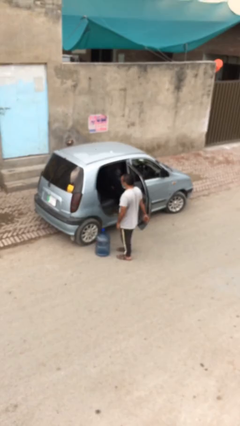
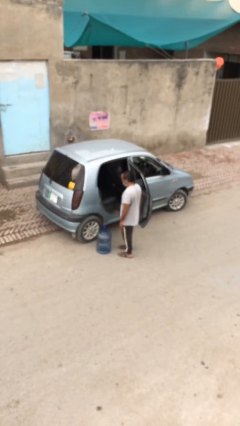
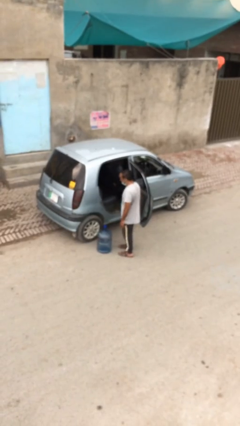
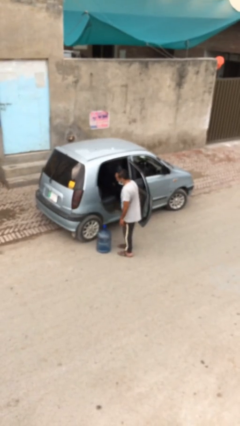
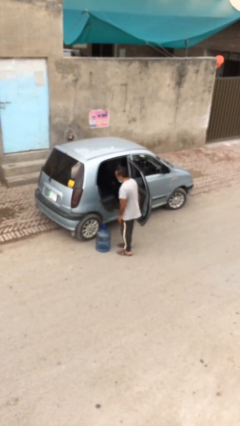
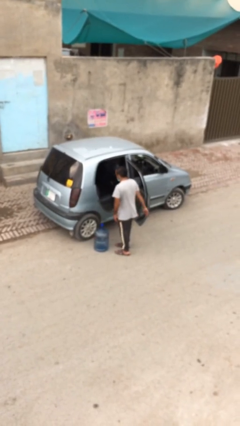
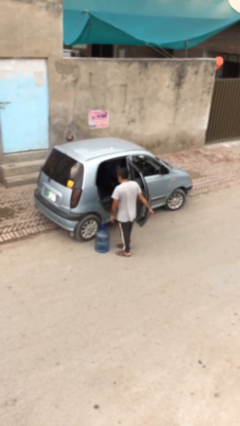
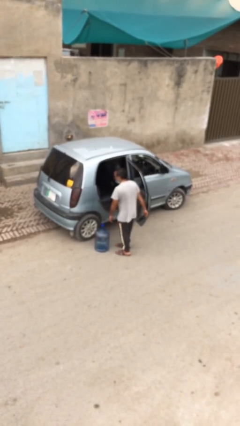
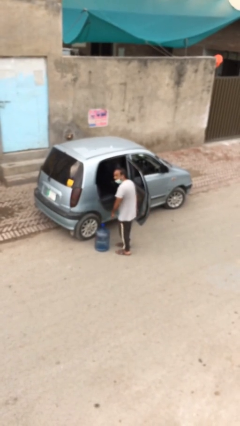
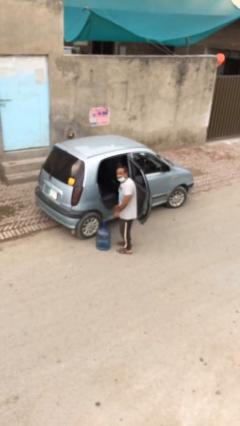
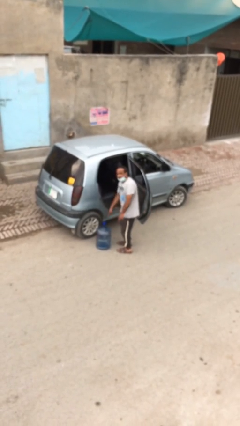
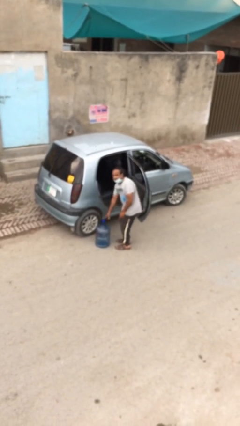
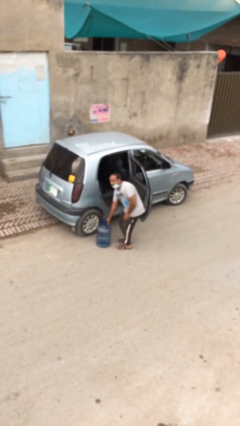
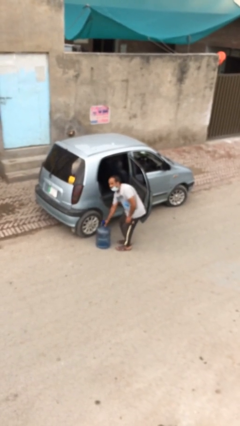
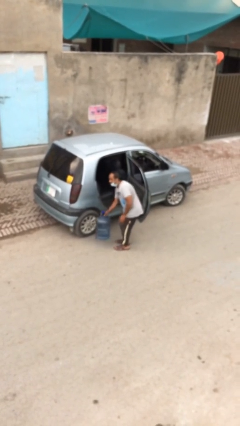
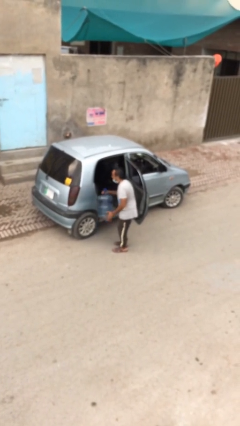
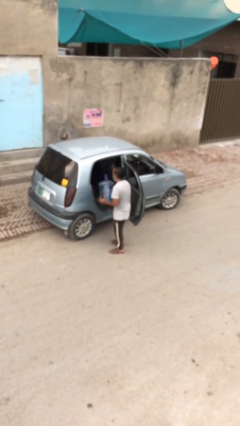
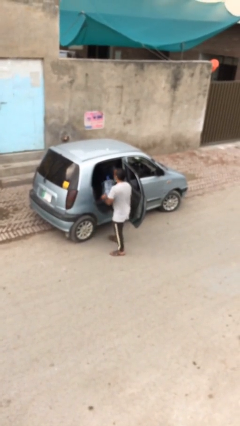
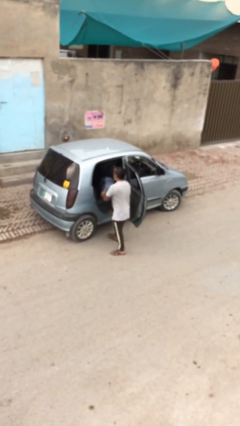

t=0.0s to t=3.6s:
person loads car

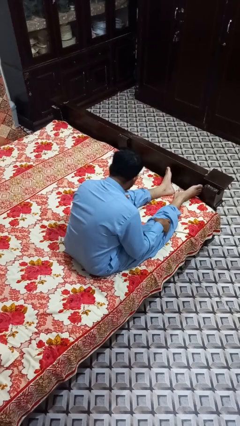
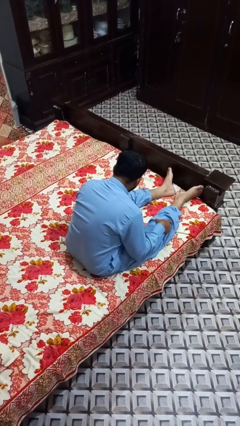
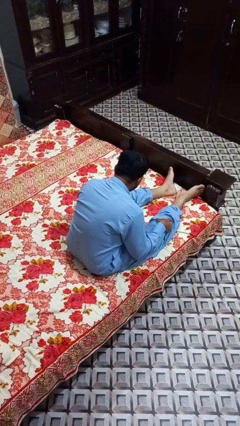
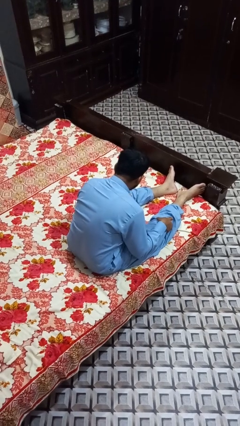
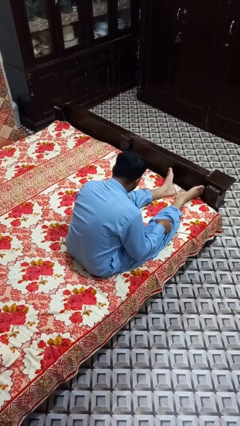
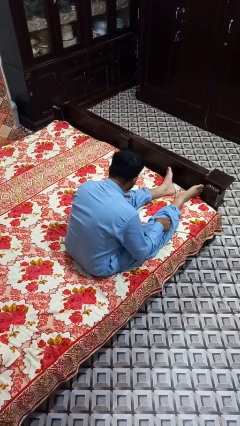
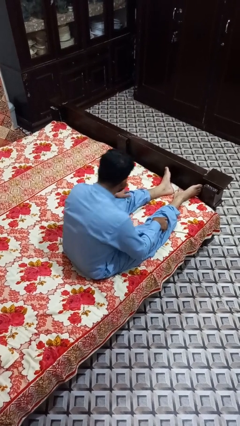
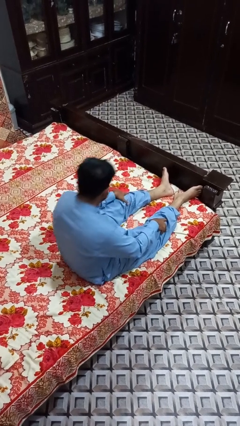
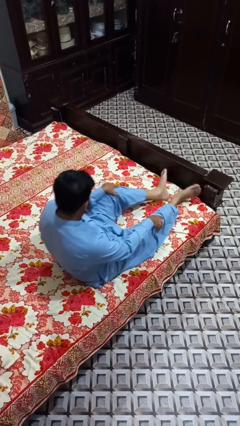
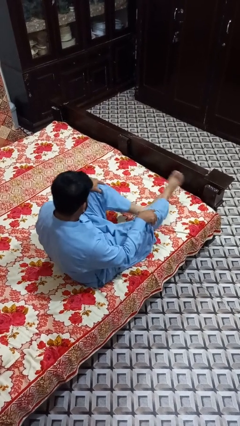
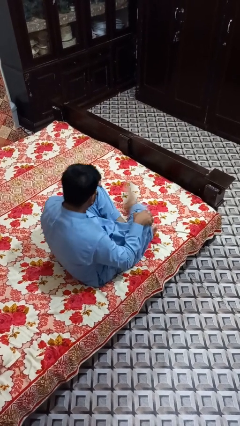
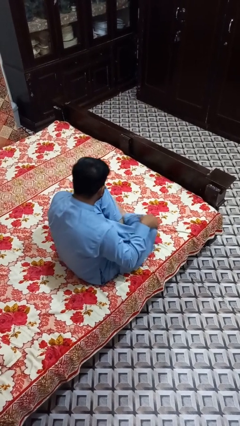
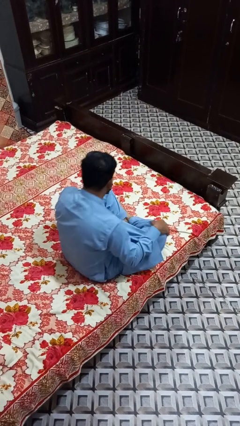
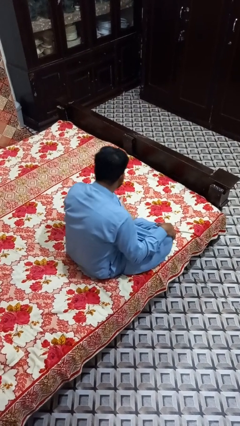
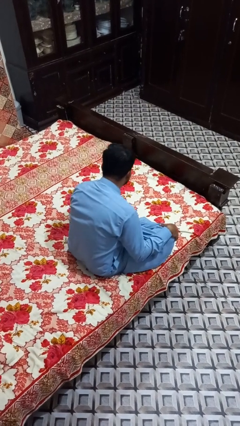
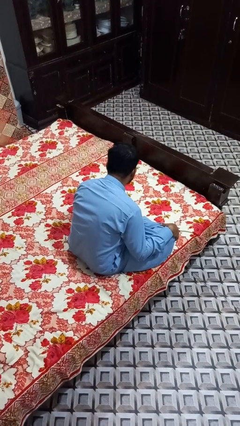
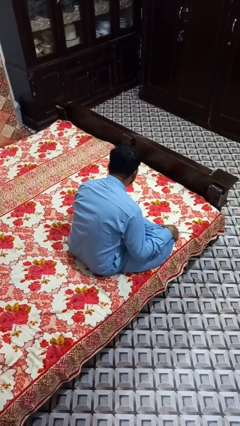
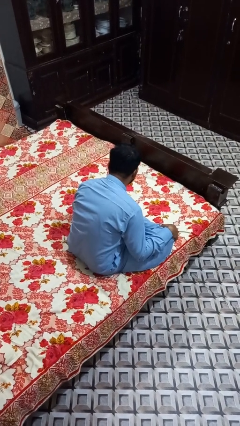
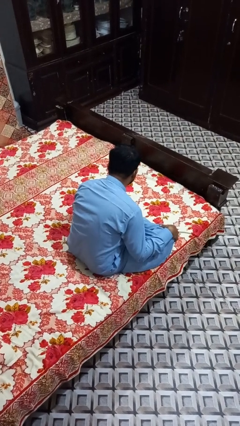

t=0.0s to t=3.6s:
person crosses legs

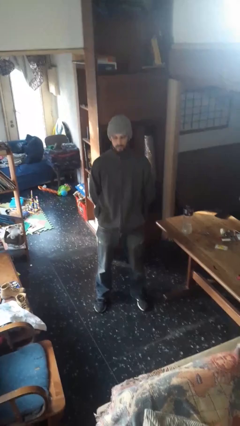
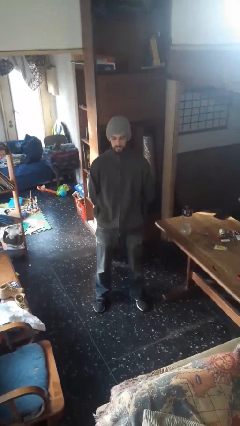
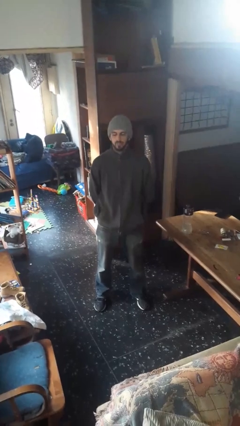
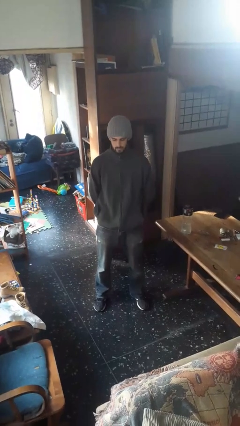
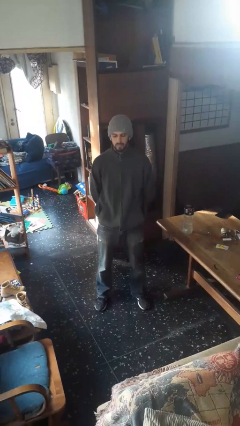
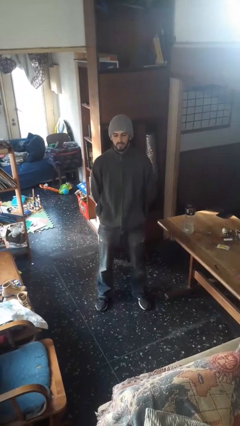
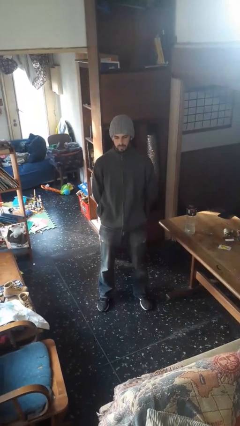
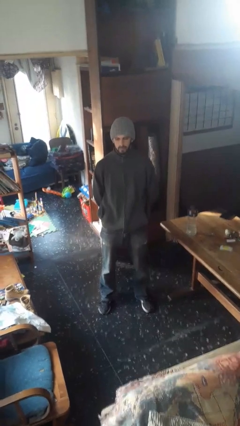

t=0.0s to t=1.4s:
person nods head

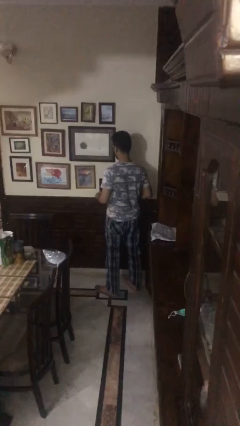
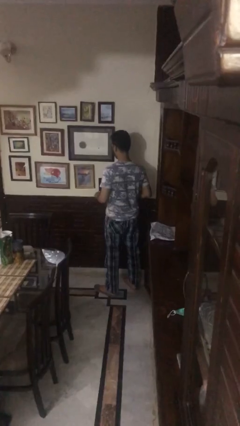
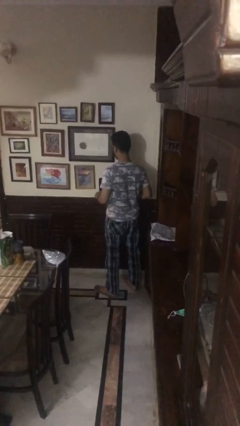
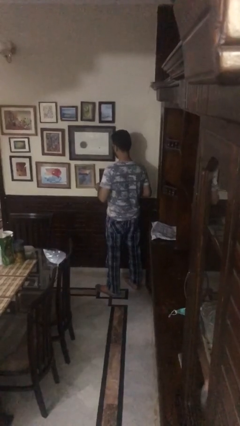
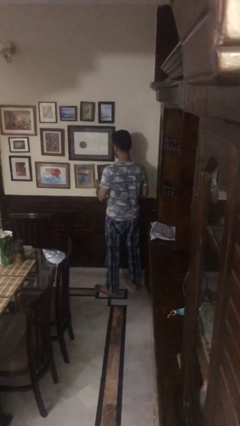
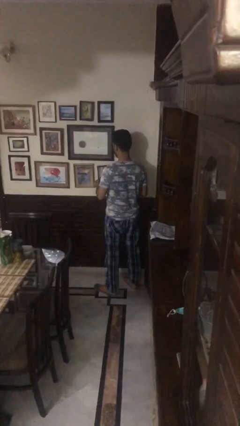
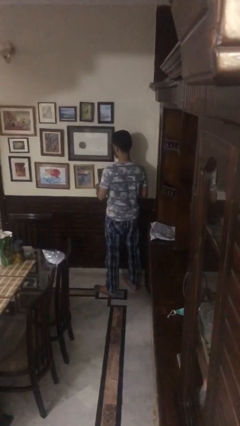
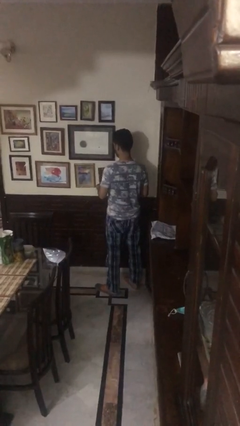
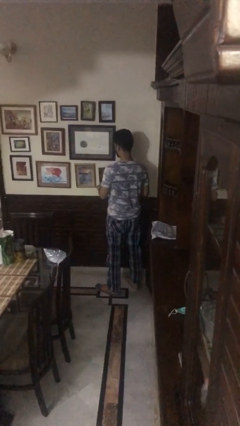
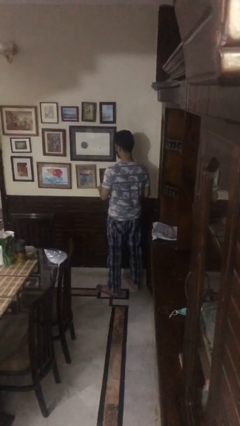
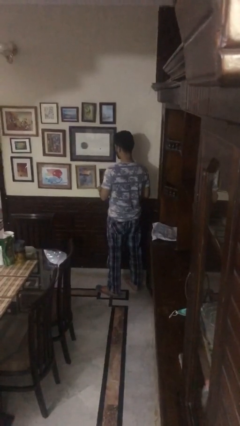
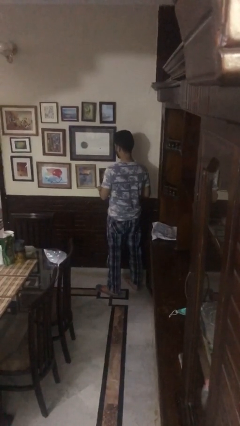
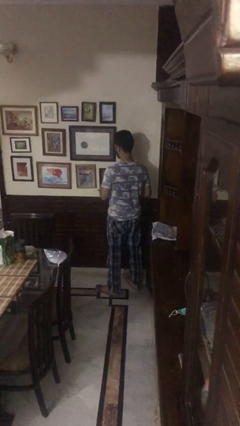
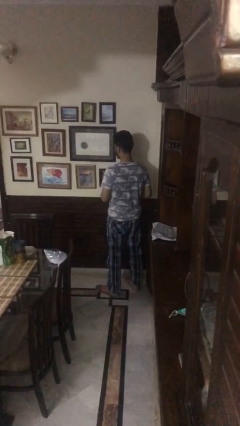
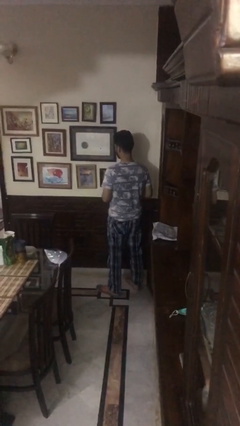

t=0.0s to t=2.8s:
person puts up picture frame

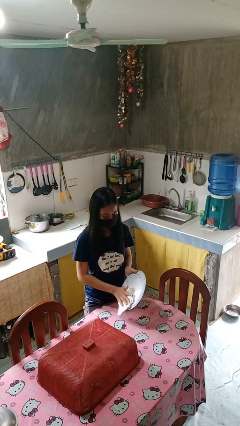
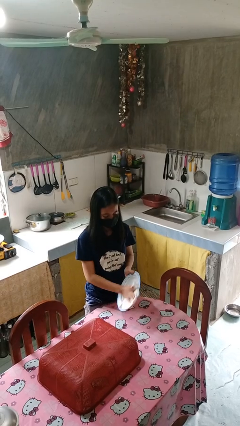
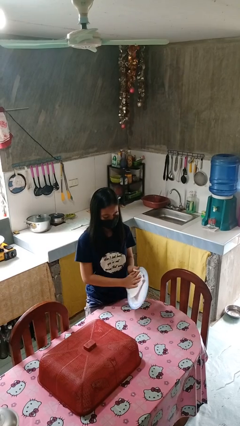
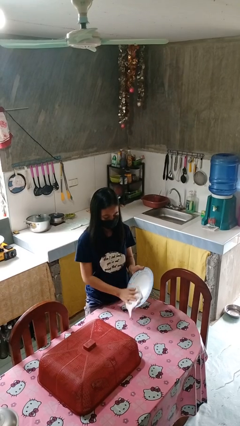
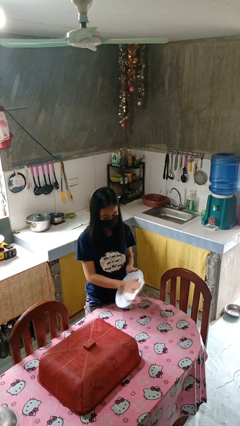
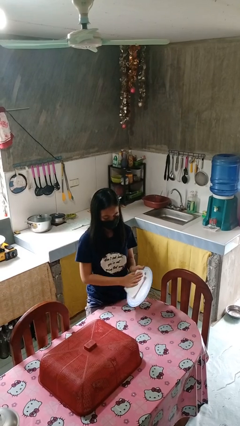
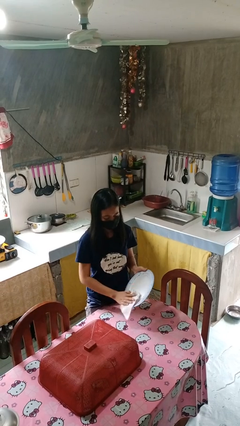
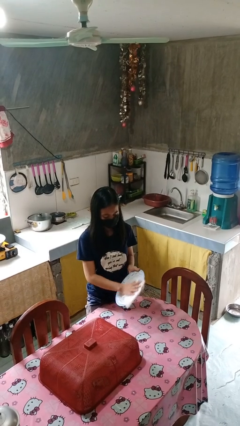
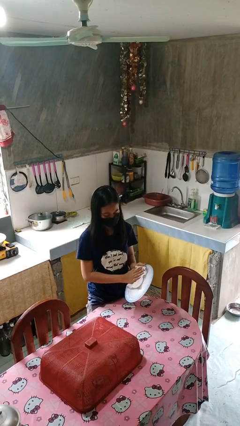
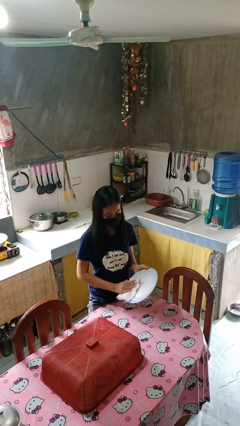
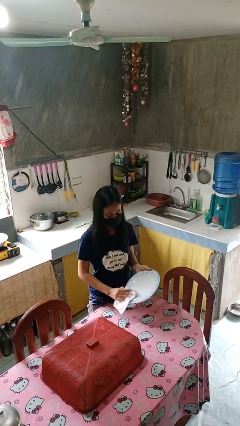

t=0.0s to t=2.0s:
person dries dish

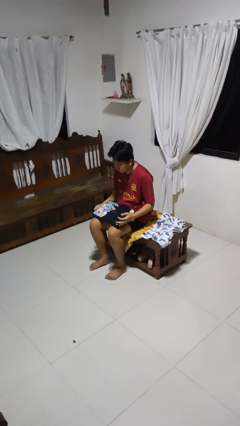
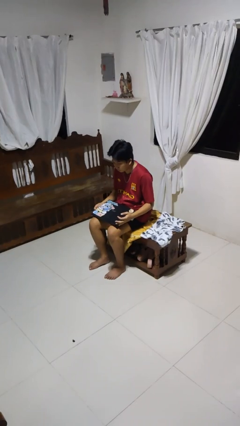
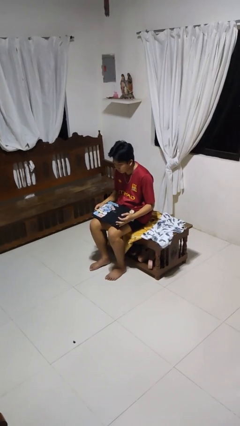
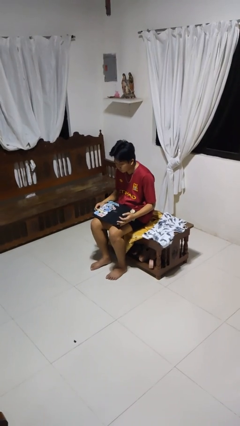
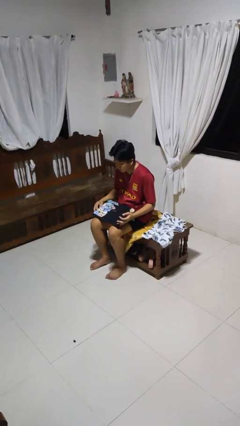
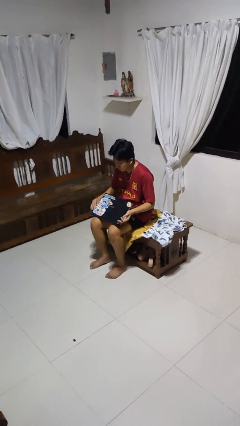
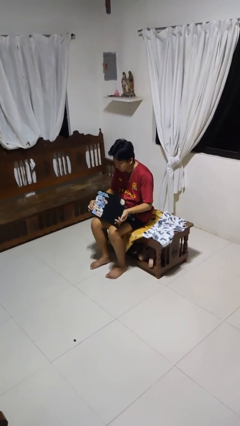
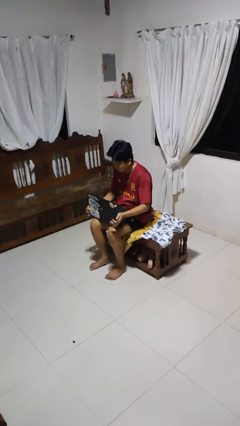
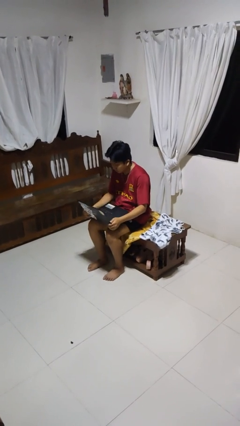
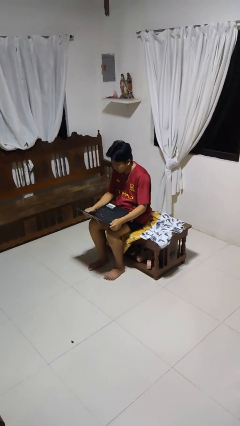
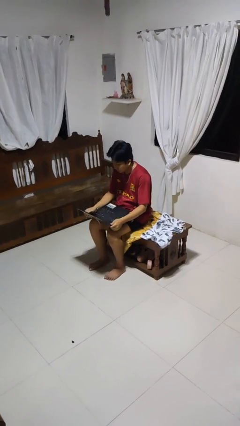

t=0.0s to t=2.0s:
person opens laptop

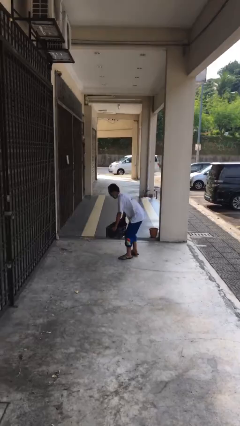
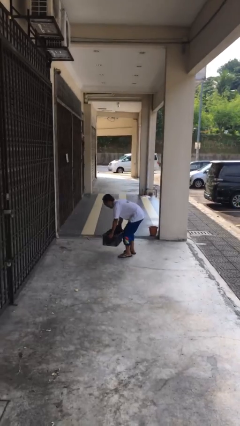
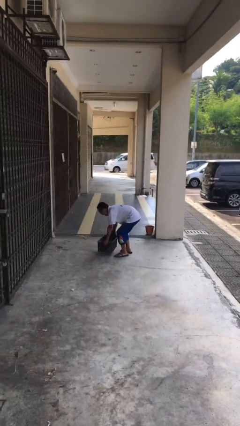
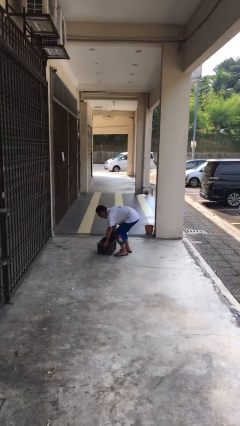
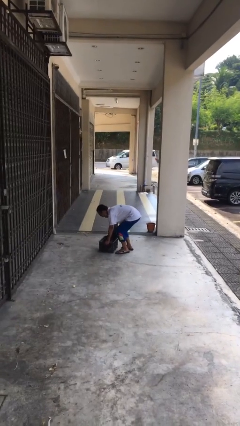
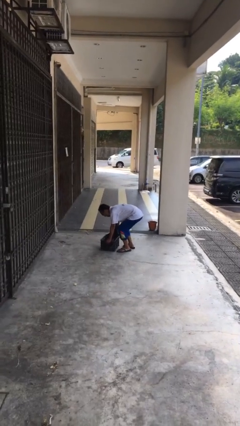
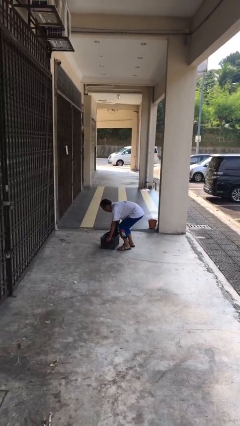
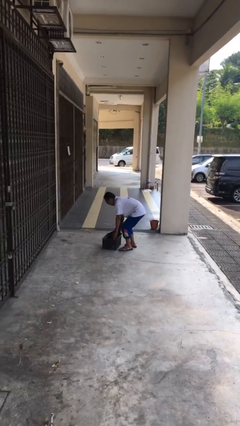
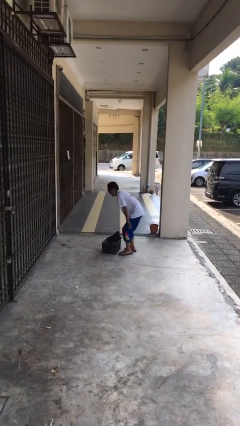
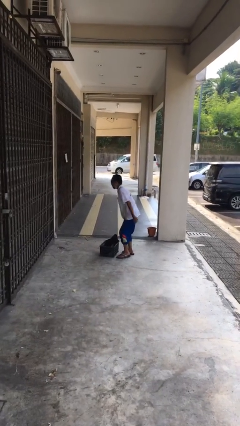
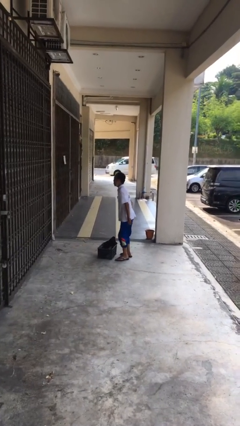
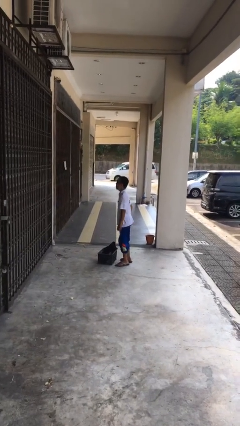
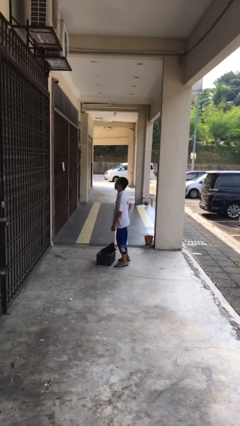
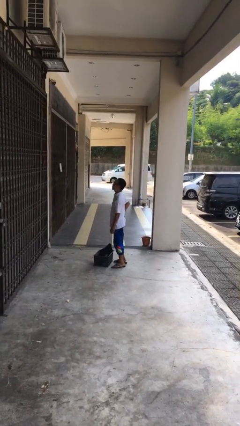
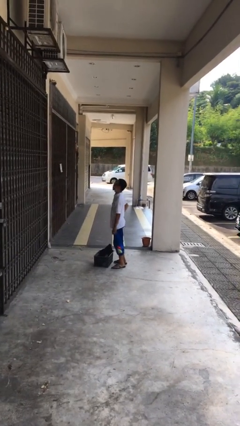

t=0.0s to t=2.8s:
person puts down object on floor
